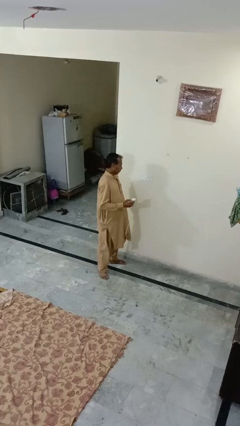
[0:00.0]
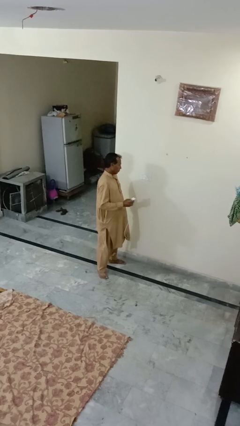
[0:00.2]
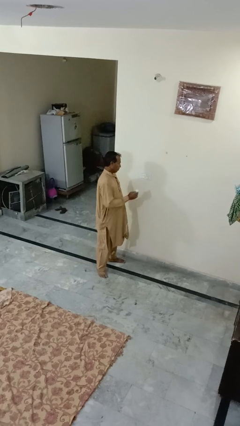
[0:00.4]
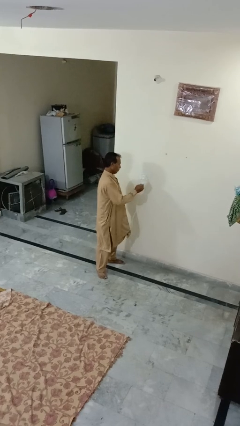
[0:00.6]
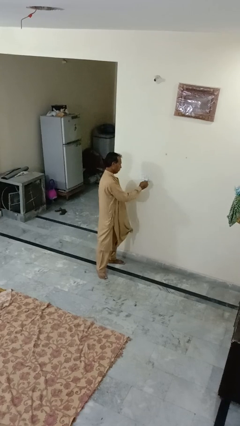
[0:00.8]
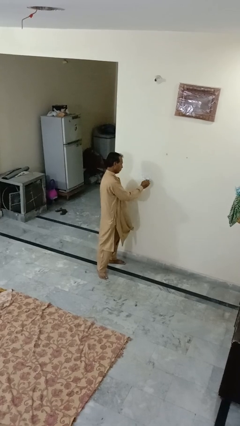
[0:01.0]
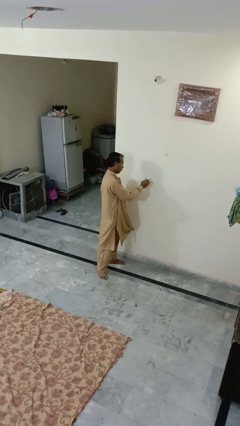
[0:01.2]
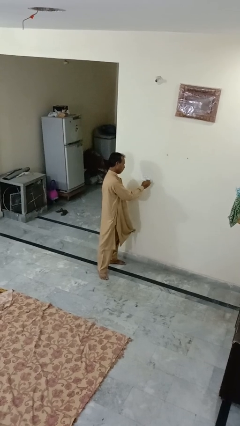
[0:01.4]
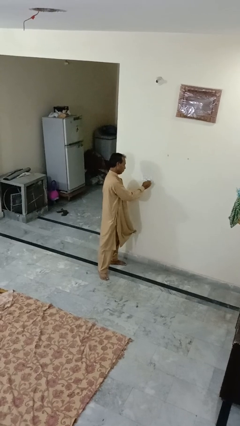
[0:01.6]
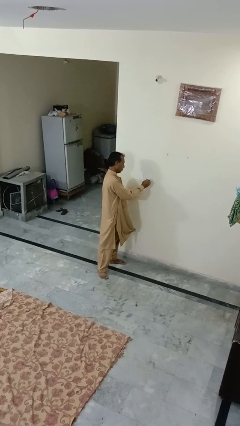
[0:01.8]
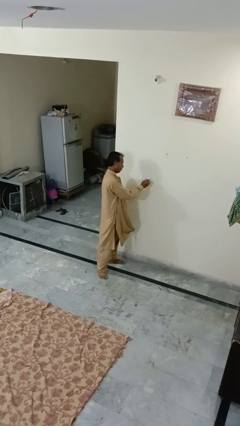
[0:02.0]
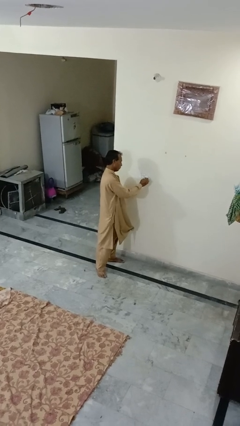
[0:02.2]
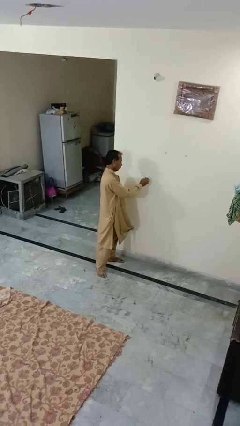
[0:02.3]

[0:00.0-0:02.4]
person plugs into electrical socket

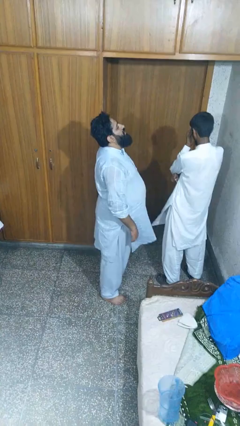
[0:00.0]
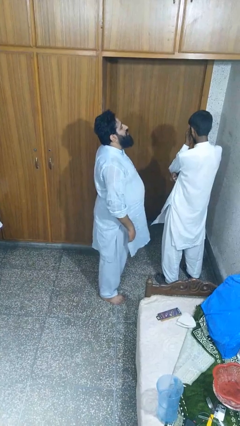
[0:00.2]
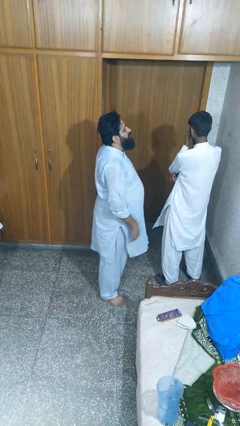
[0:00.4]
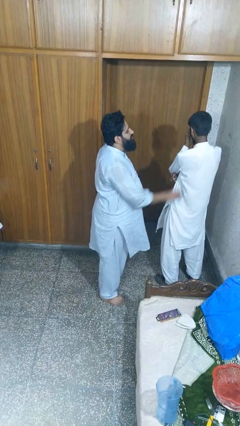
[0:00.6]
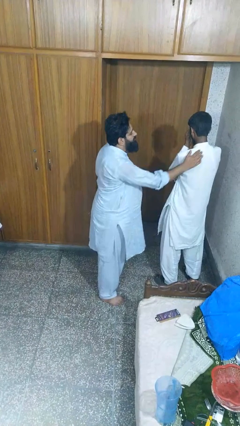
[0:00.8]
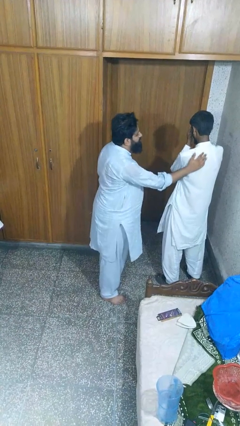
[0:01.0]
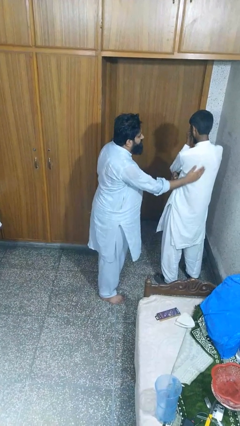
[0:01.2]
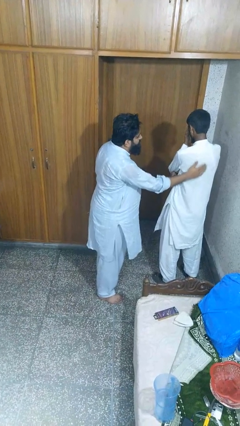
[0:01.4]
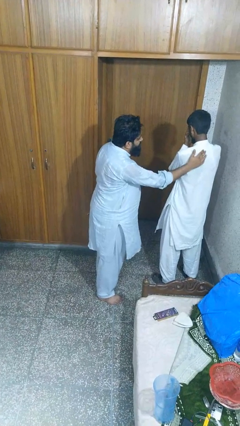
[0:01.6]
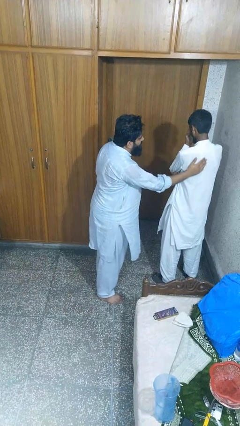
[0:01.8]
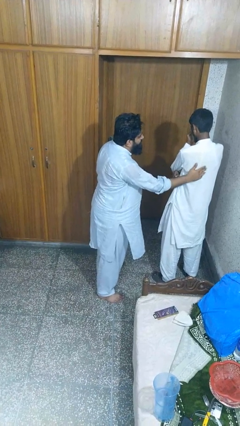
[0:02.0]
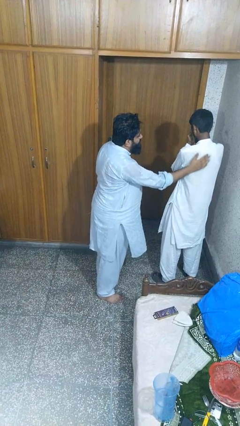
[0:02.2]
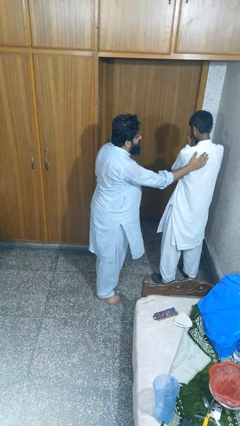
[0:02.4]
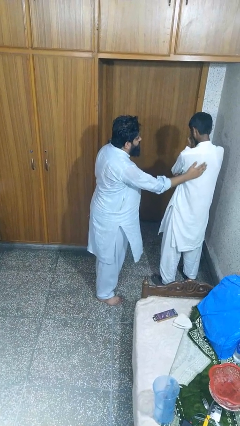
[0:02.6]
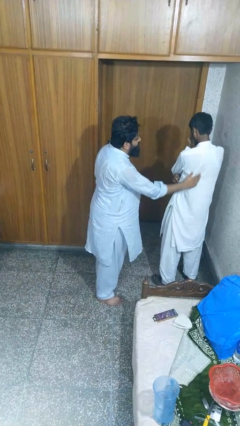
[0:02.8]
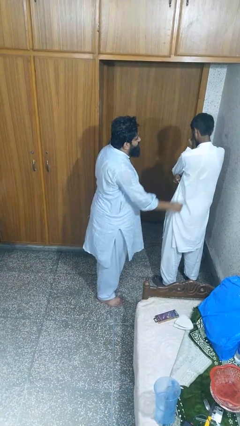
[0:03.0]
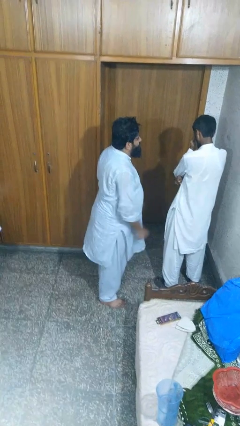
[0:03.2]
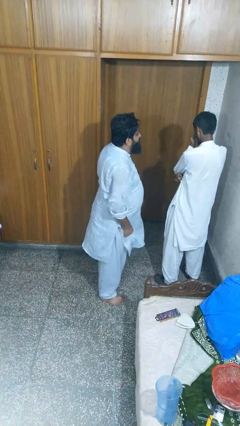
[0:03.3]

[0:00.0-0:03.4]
person touches back of person

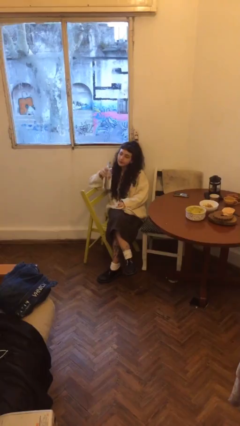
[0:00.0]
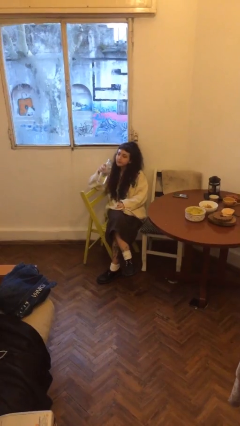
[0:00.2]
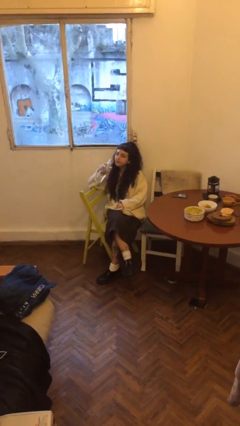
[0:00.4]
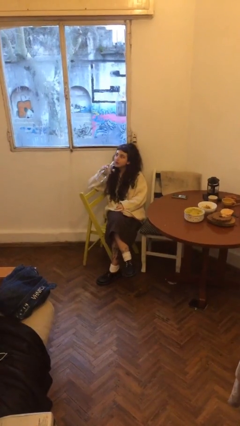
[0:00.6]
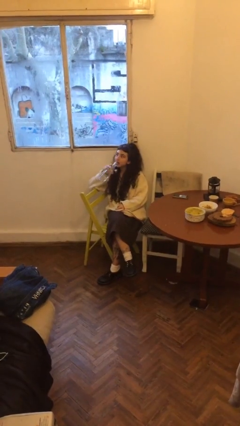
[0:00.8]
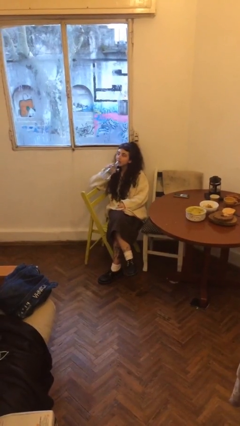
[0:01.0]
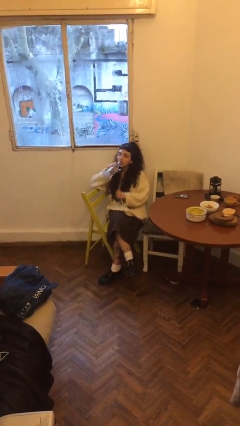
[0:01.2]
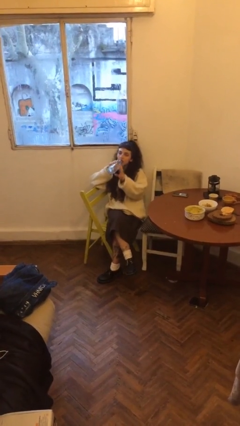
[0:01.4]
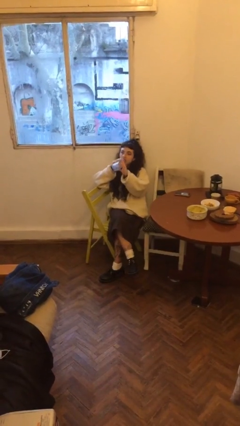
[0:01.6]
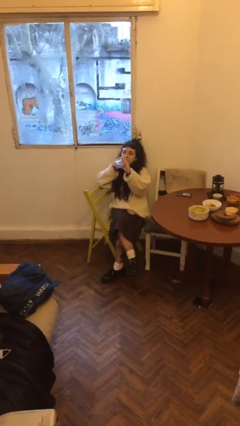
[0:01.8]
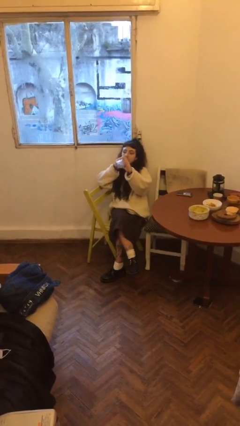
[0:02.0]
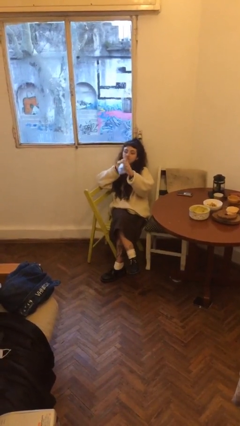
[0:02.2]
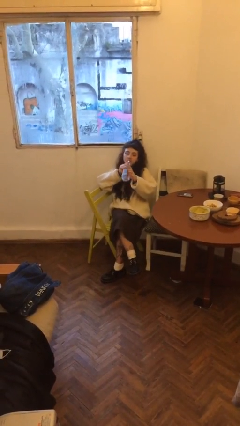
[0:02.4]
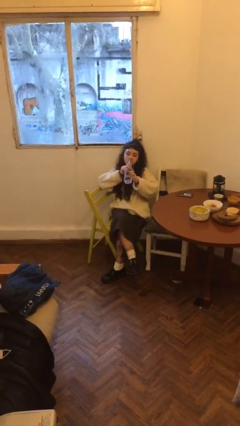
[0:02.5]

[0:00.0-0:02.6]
person drinks from bottle

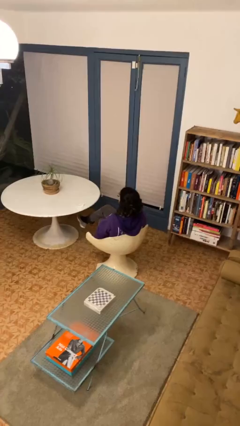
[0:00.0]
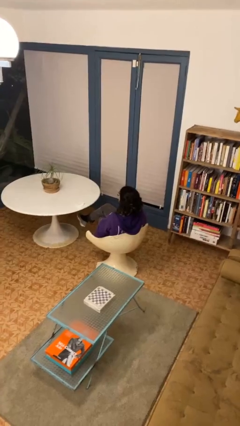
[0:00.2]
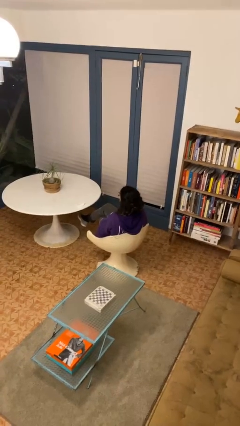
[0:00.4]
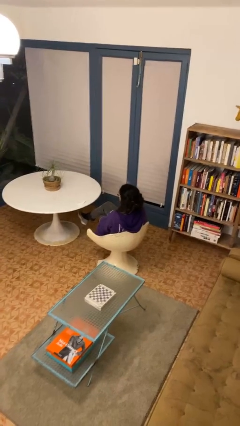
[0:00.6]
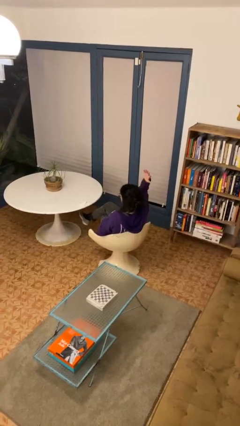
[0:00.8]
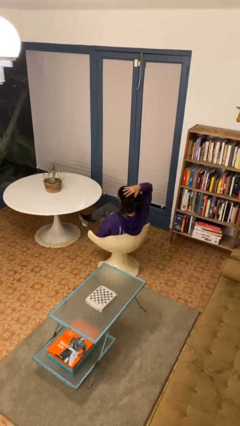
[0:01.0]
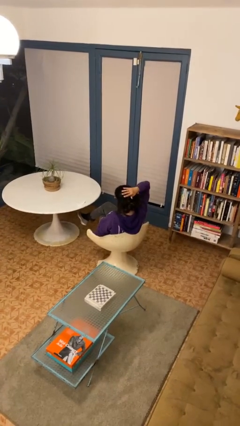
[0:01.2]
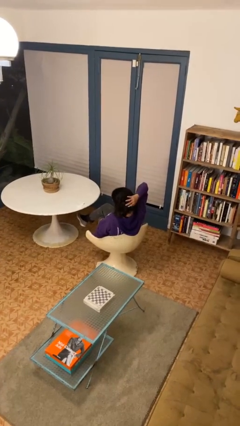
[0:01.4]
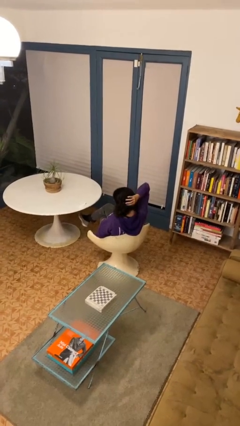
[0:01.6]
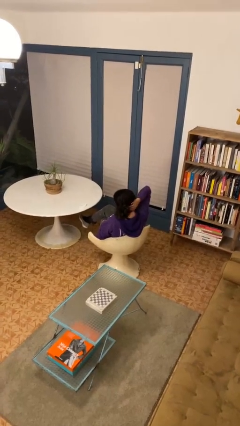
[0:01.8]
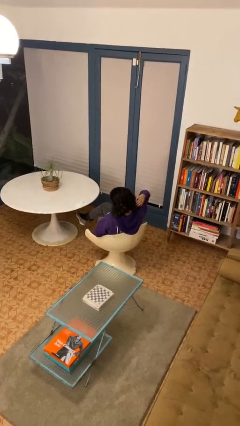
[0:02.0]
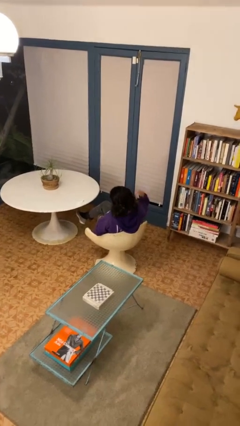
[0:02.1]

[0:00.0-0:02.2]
person pats head

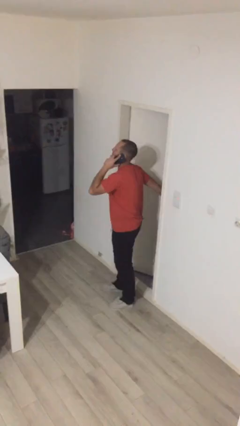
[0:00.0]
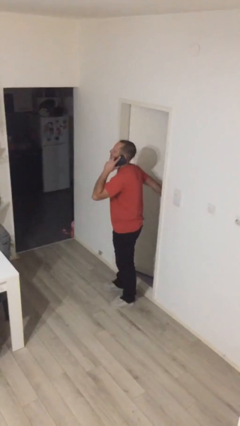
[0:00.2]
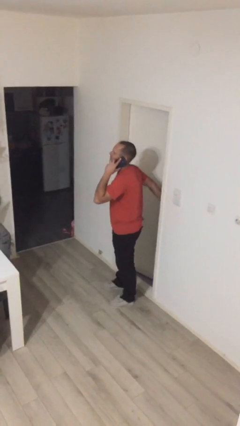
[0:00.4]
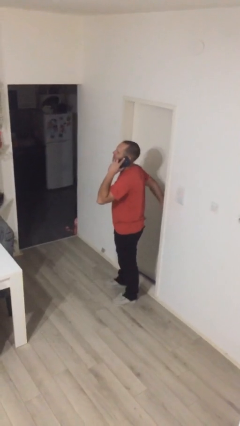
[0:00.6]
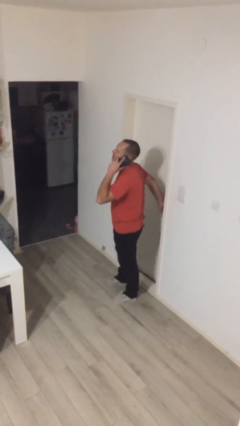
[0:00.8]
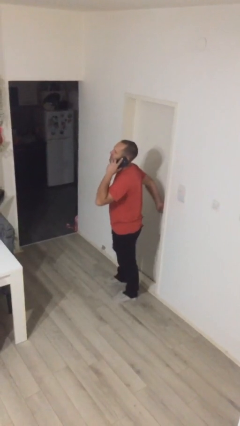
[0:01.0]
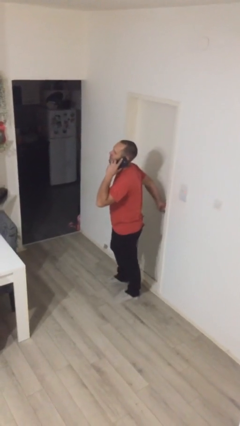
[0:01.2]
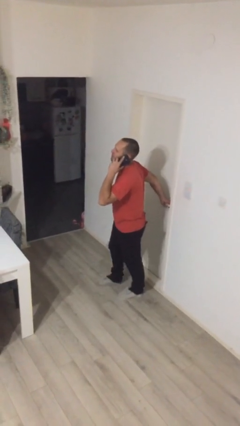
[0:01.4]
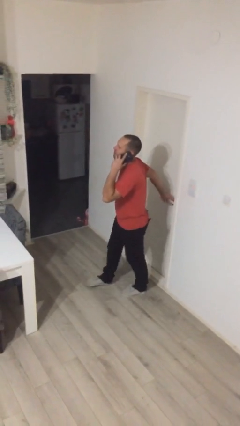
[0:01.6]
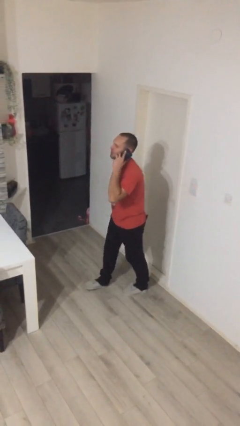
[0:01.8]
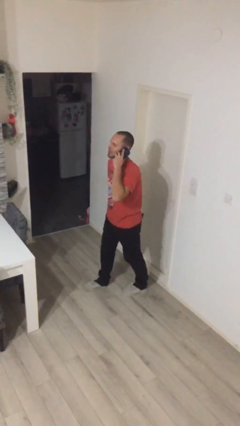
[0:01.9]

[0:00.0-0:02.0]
person closes facility door

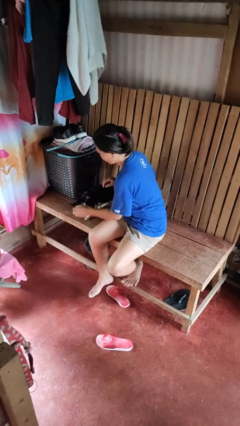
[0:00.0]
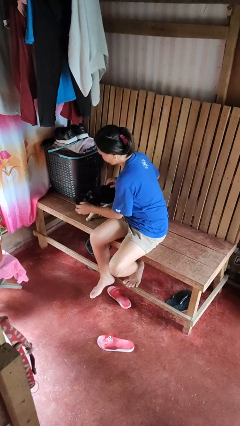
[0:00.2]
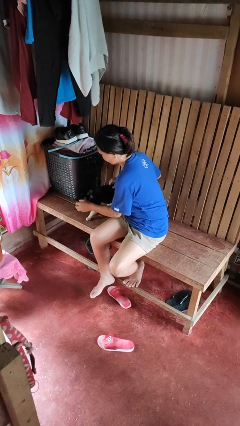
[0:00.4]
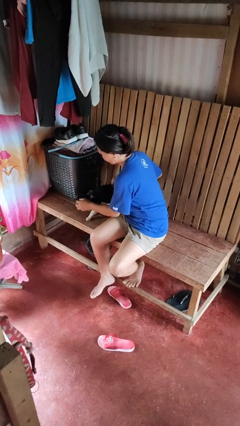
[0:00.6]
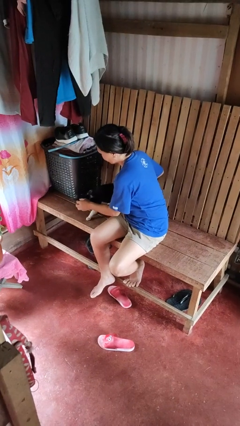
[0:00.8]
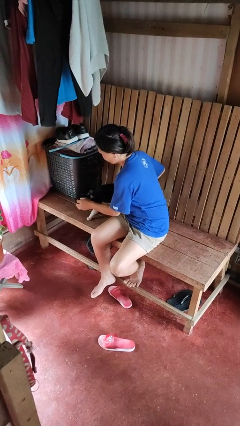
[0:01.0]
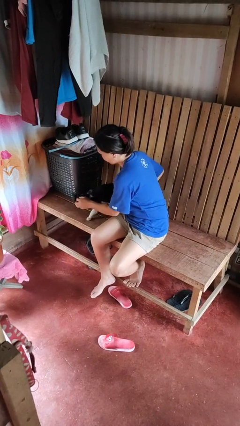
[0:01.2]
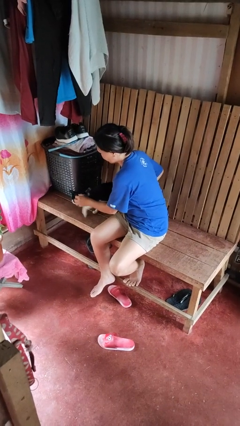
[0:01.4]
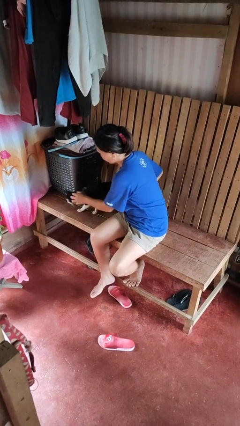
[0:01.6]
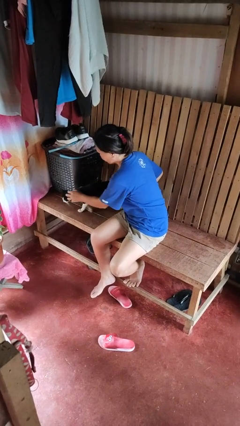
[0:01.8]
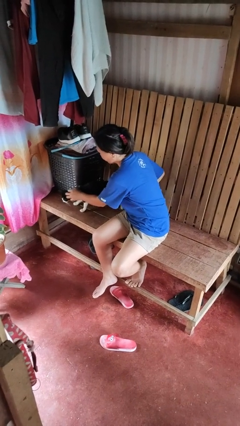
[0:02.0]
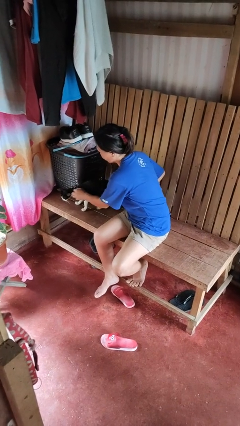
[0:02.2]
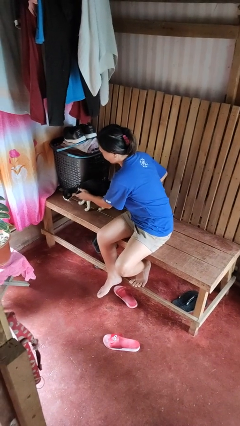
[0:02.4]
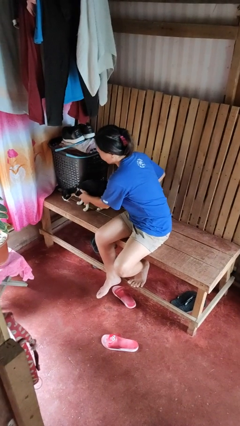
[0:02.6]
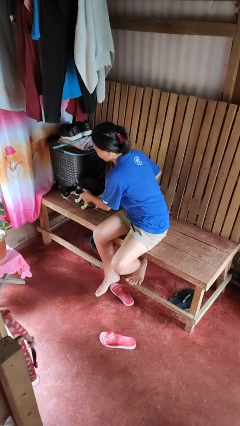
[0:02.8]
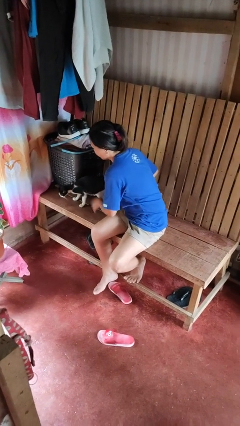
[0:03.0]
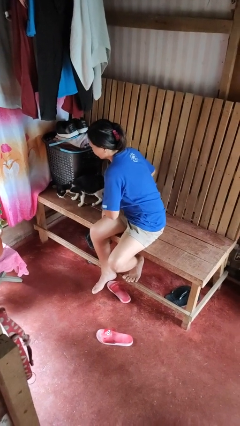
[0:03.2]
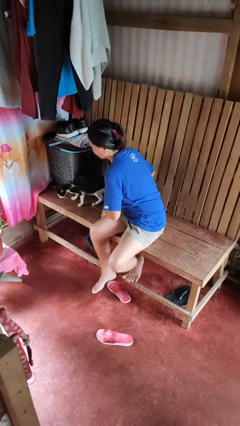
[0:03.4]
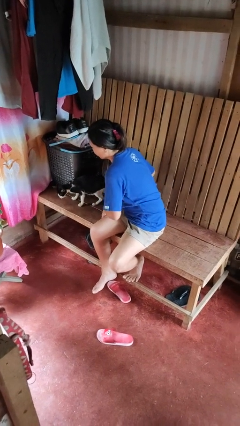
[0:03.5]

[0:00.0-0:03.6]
person pets cat

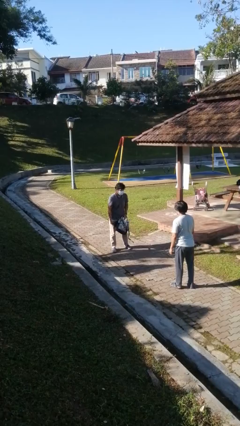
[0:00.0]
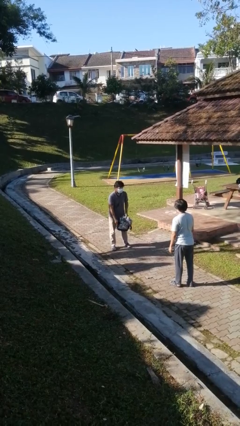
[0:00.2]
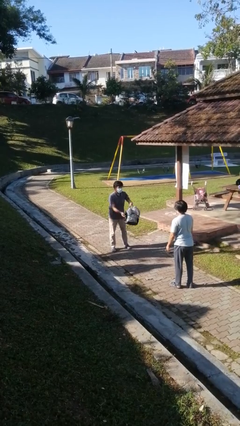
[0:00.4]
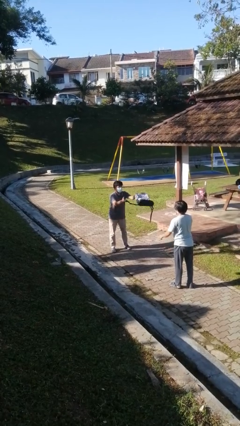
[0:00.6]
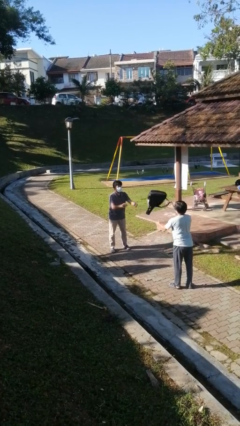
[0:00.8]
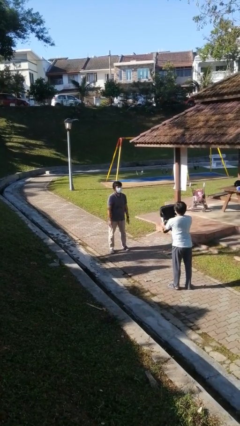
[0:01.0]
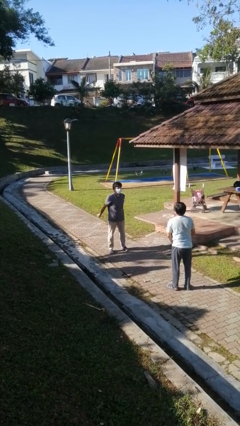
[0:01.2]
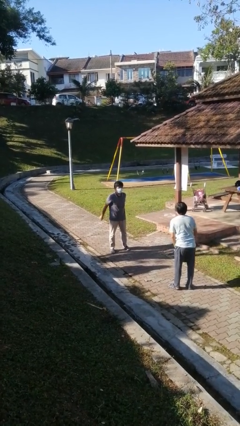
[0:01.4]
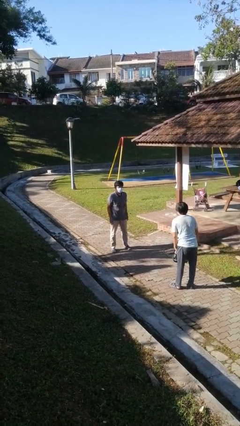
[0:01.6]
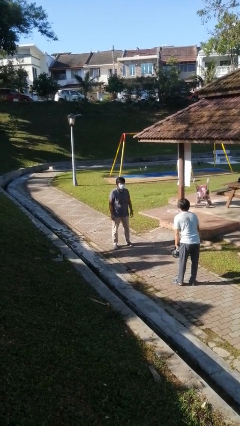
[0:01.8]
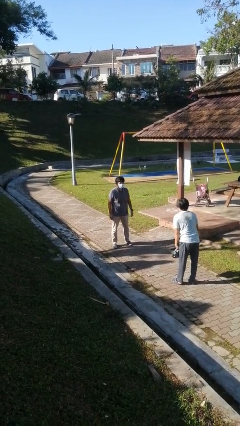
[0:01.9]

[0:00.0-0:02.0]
person throws object to person
